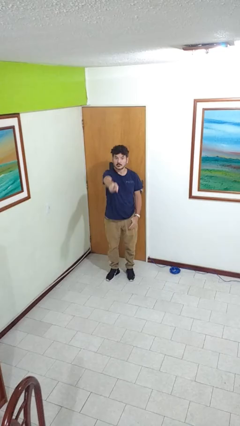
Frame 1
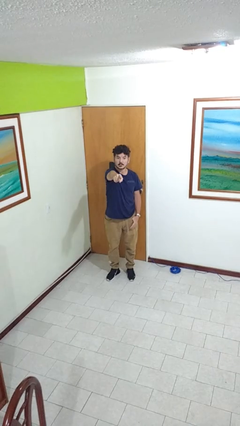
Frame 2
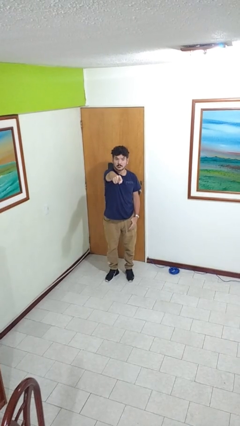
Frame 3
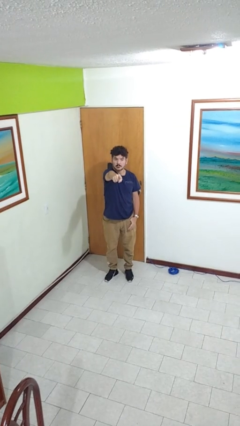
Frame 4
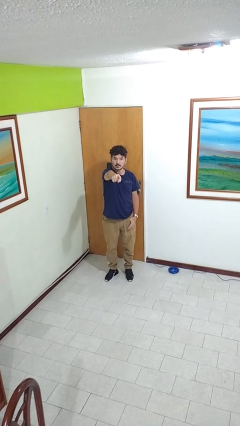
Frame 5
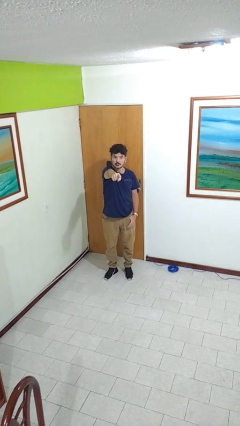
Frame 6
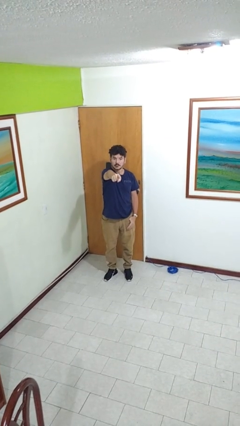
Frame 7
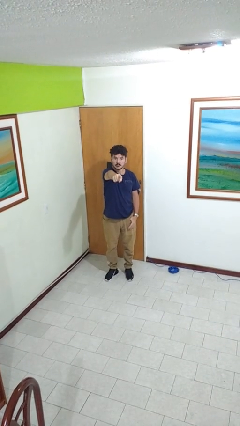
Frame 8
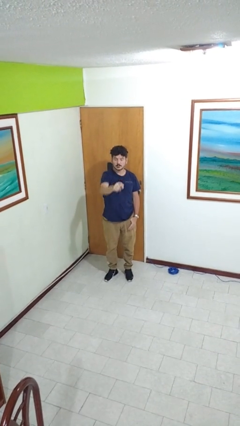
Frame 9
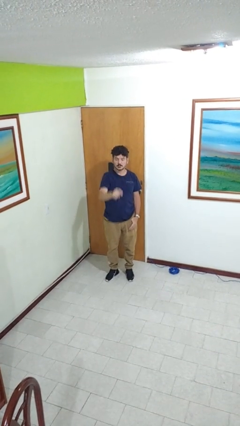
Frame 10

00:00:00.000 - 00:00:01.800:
person points at person

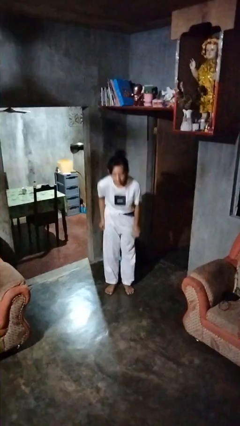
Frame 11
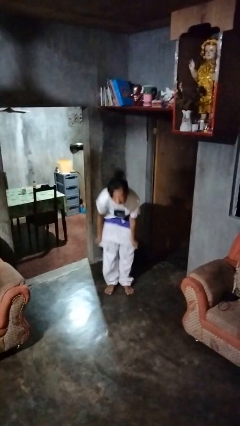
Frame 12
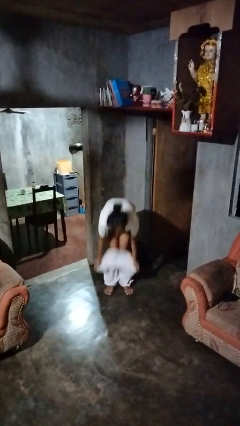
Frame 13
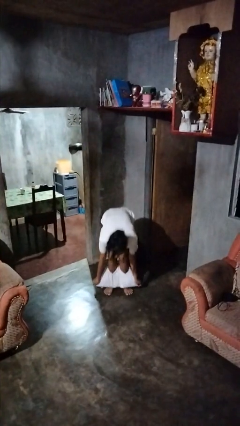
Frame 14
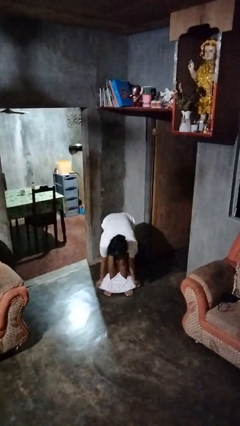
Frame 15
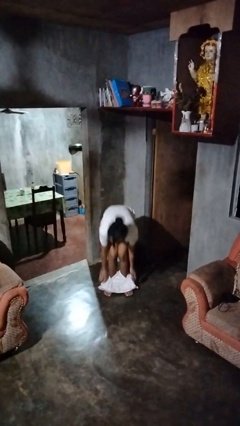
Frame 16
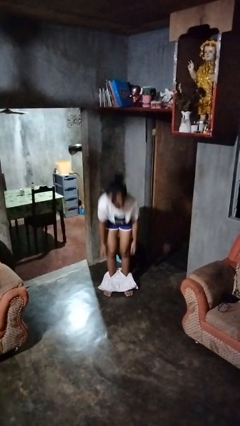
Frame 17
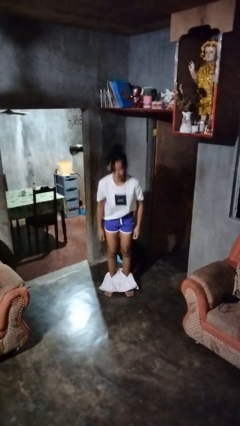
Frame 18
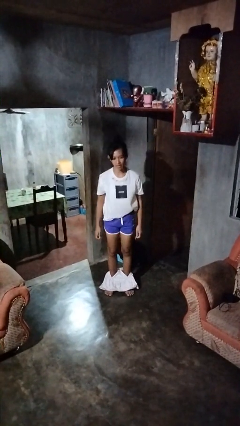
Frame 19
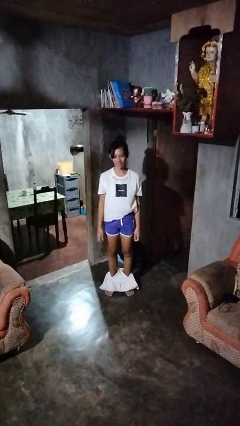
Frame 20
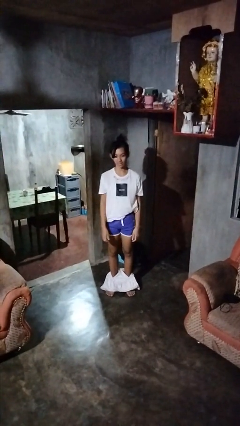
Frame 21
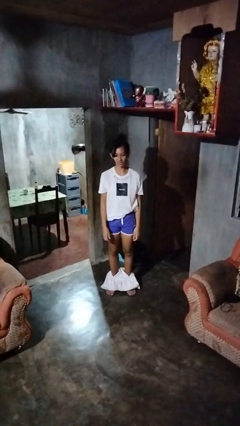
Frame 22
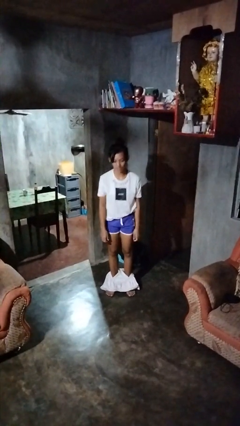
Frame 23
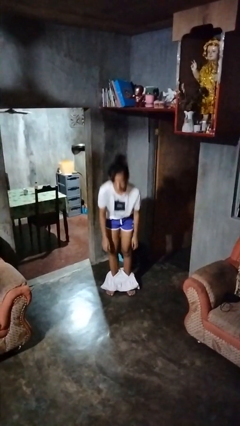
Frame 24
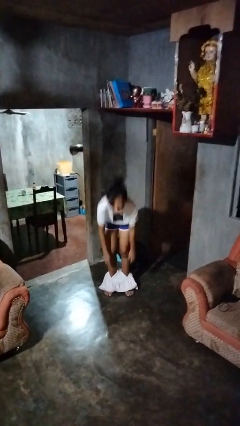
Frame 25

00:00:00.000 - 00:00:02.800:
person takes off pants

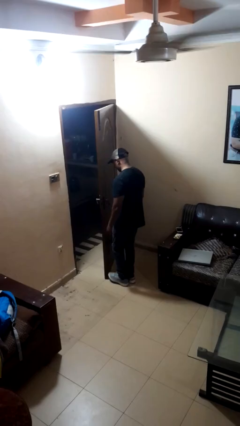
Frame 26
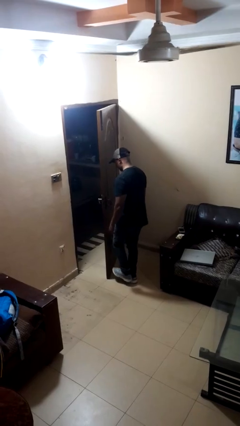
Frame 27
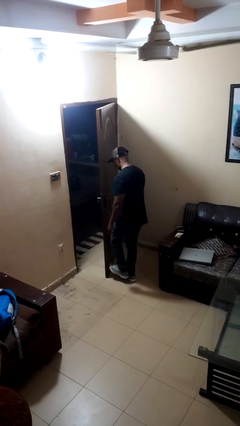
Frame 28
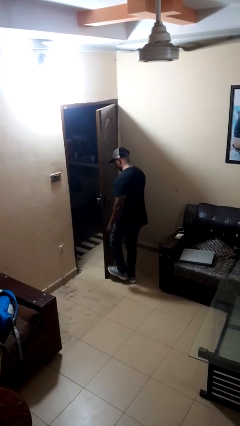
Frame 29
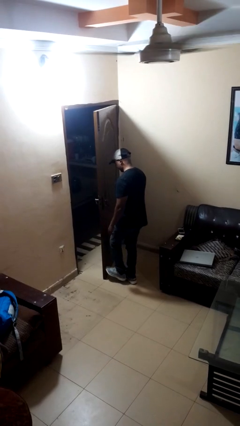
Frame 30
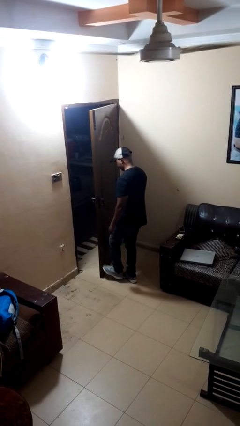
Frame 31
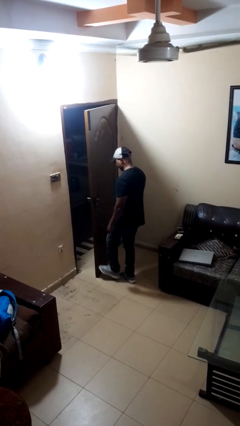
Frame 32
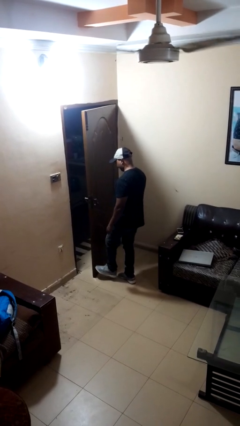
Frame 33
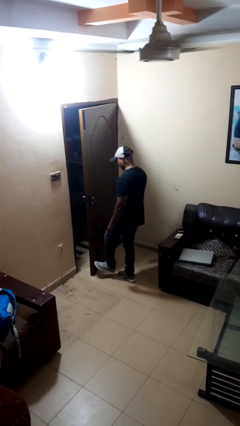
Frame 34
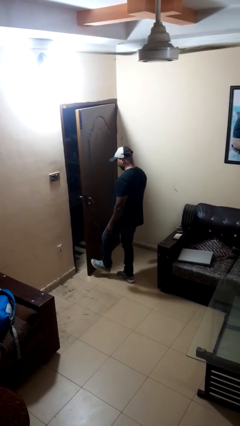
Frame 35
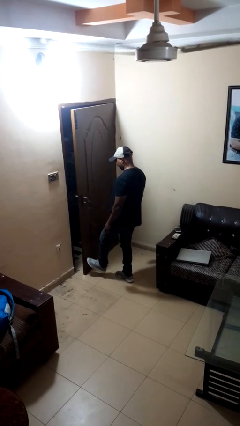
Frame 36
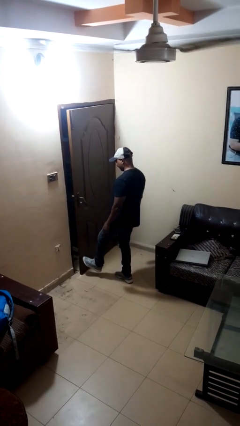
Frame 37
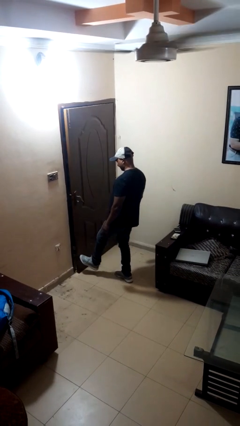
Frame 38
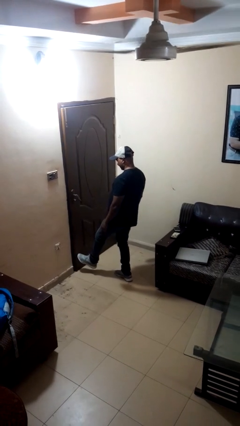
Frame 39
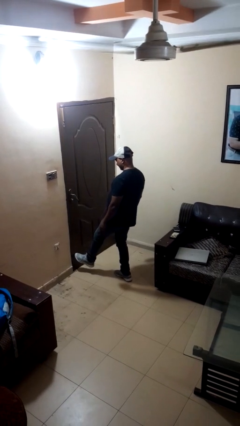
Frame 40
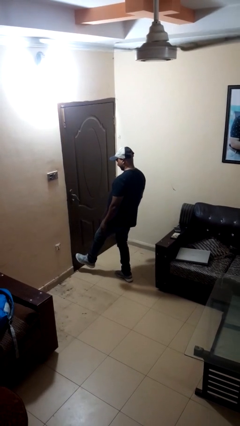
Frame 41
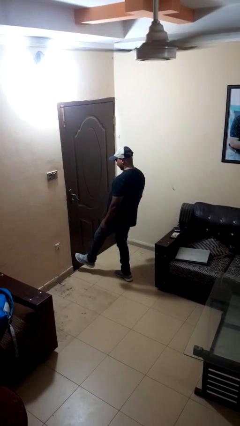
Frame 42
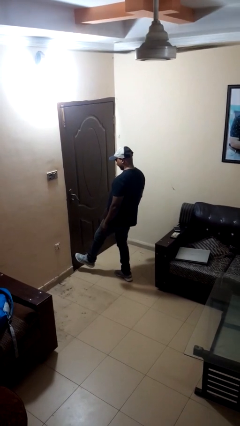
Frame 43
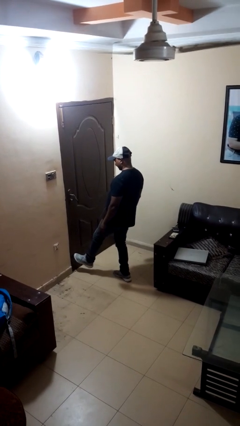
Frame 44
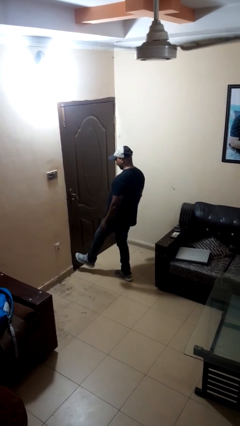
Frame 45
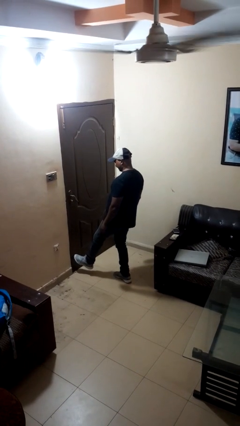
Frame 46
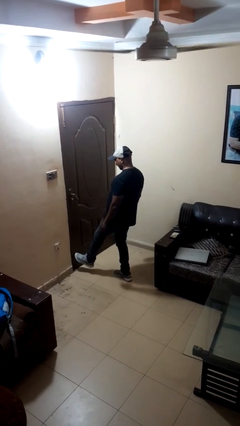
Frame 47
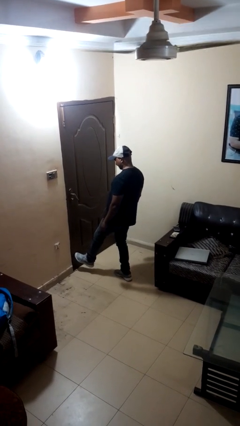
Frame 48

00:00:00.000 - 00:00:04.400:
person closes door with foot

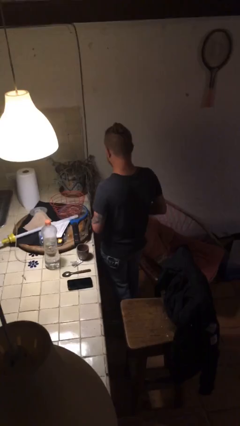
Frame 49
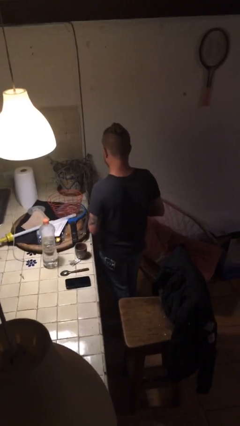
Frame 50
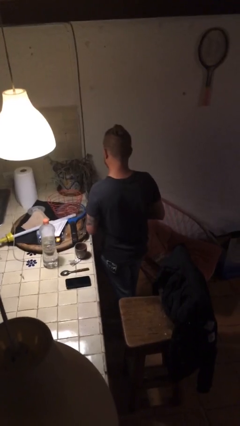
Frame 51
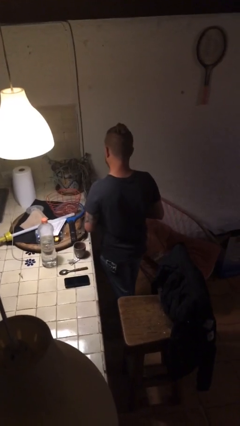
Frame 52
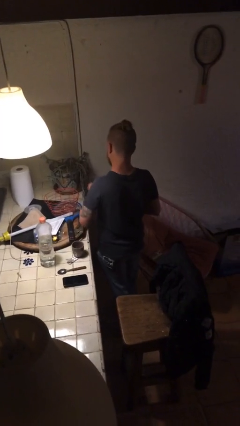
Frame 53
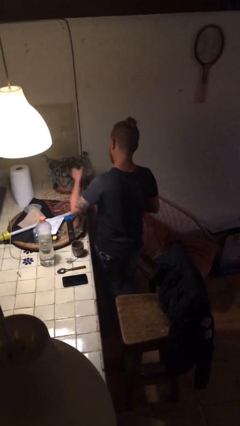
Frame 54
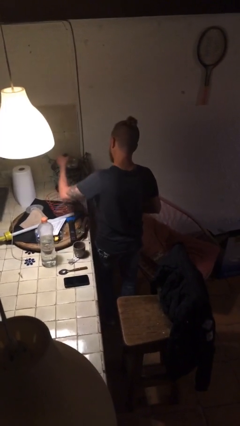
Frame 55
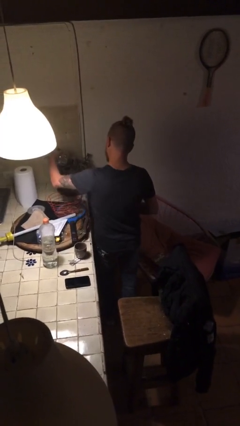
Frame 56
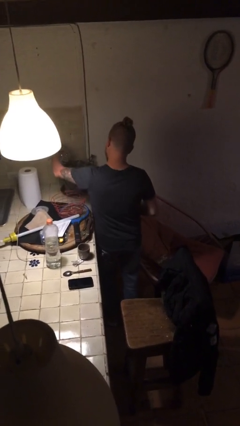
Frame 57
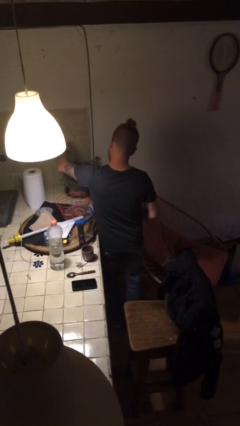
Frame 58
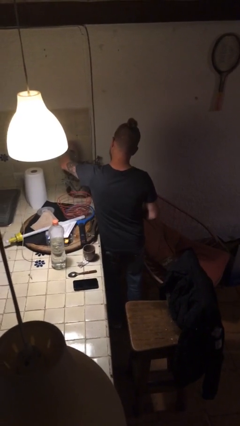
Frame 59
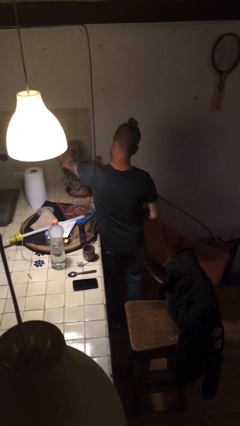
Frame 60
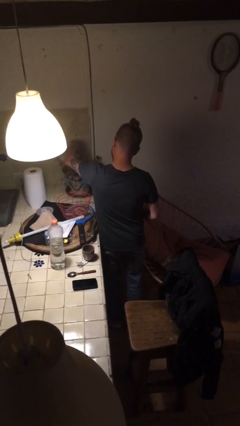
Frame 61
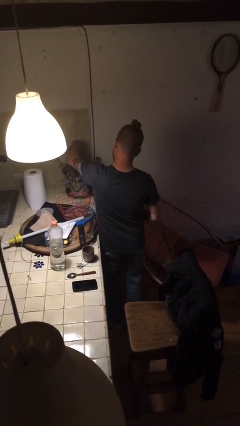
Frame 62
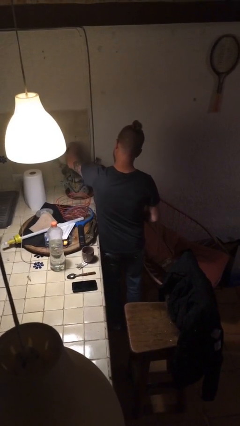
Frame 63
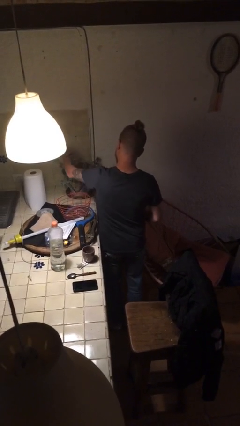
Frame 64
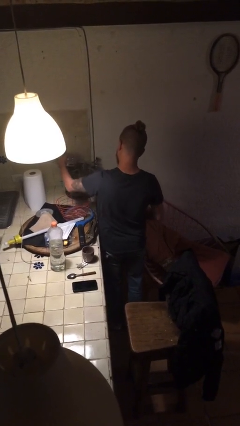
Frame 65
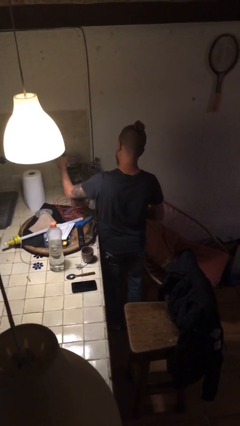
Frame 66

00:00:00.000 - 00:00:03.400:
person waters houseplant

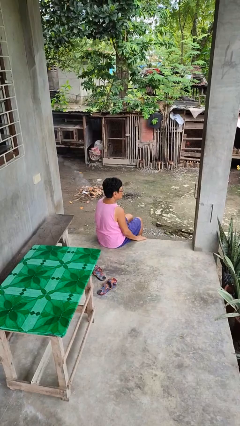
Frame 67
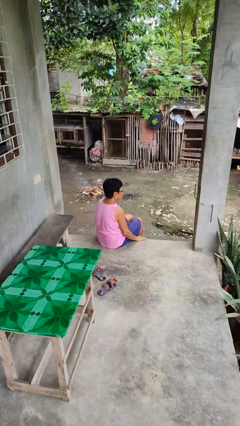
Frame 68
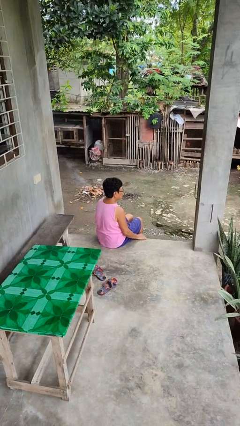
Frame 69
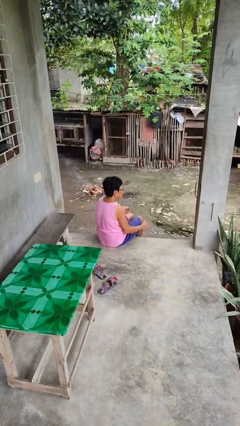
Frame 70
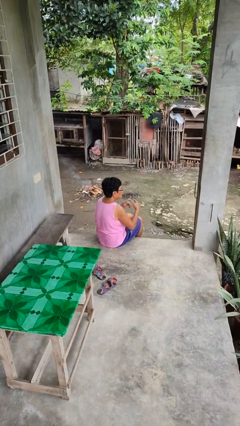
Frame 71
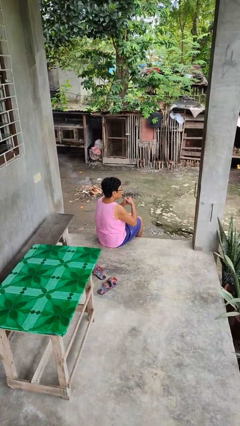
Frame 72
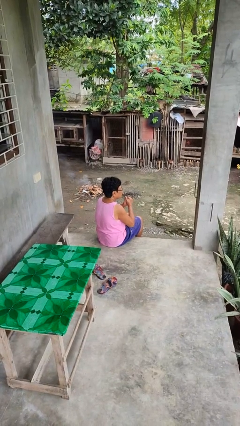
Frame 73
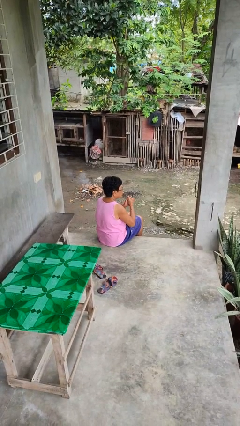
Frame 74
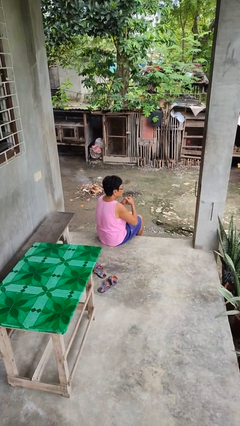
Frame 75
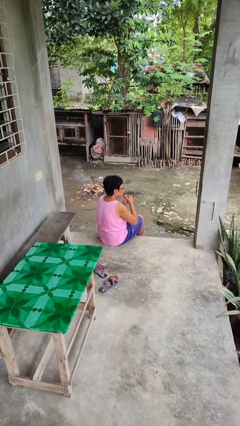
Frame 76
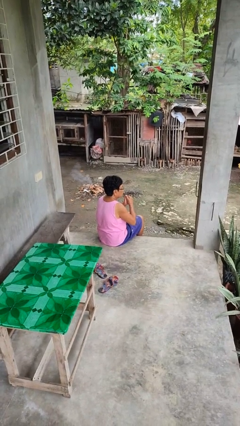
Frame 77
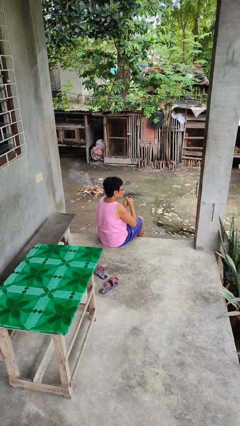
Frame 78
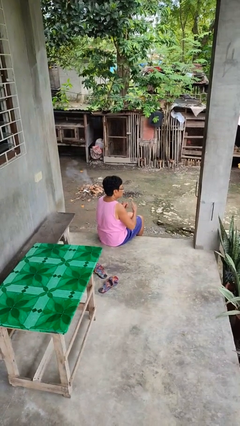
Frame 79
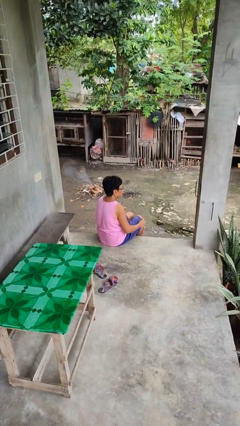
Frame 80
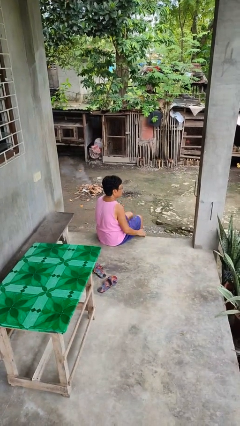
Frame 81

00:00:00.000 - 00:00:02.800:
person cracks knuckles

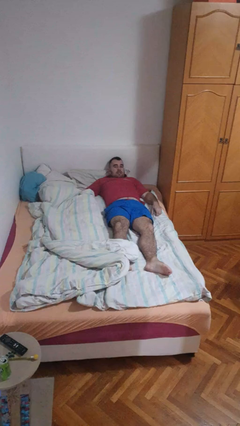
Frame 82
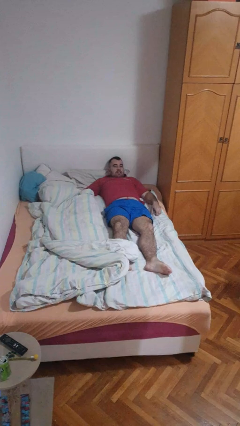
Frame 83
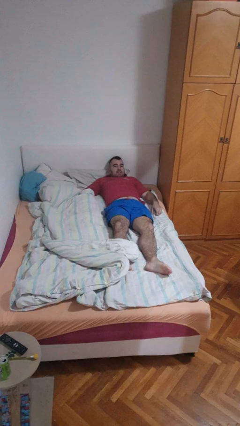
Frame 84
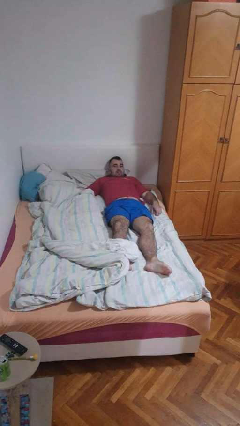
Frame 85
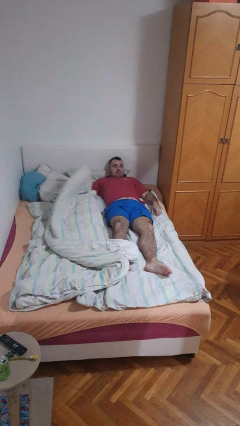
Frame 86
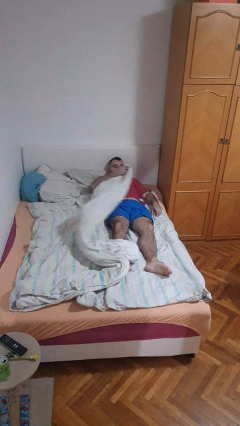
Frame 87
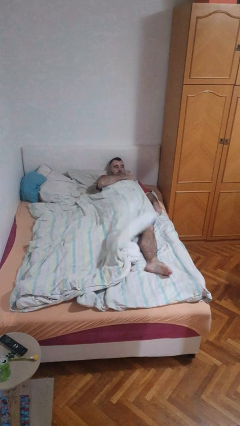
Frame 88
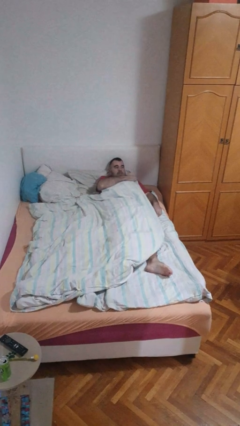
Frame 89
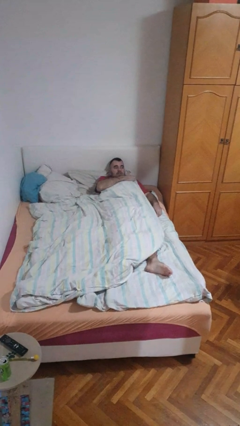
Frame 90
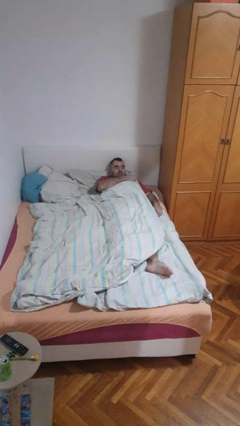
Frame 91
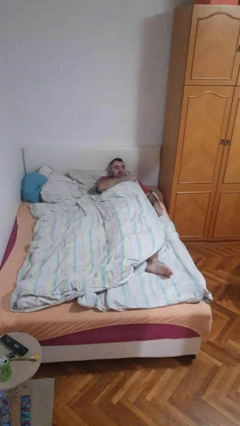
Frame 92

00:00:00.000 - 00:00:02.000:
person covers with bedsheets
